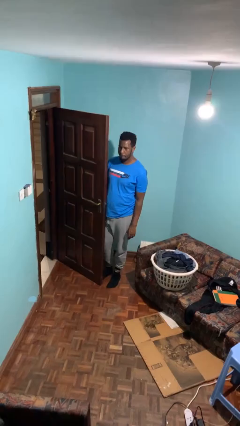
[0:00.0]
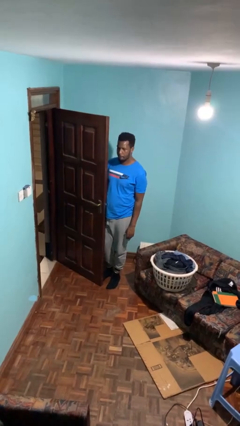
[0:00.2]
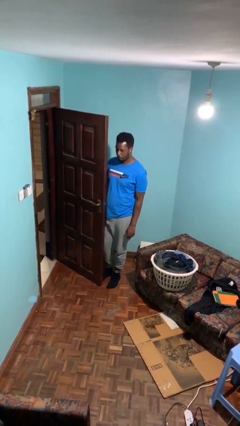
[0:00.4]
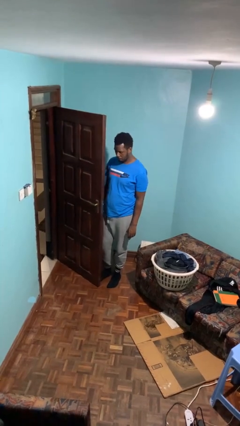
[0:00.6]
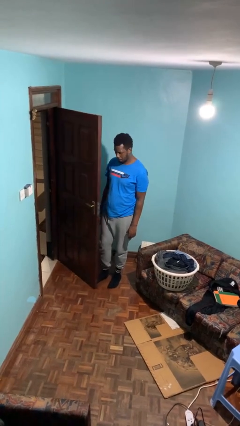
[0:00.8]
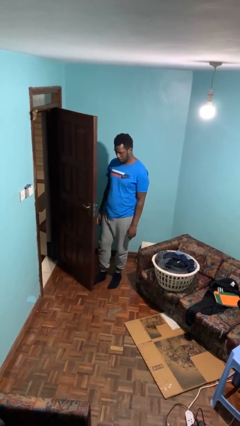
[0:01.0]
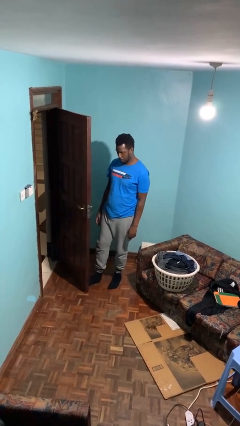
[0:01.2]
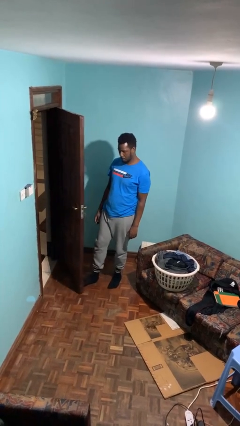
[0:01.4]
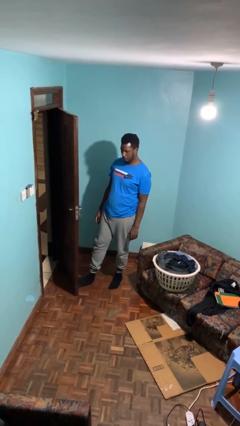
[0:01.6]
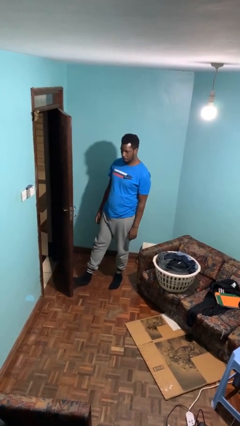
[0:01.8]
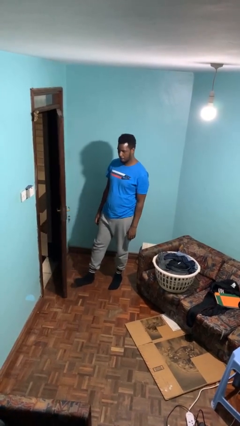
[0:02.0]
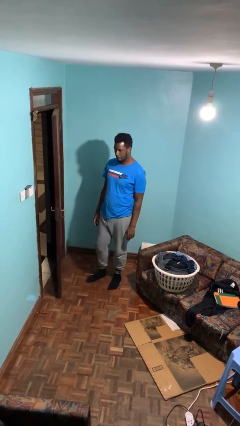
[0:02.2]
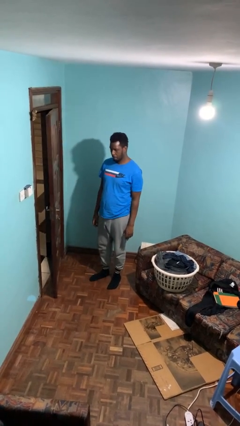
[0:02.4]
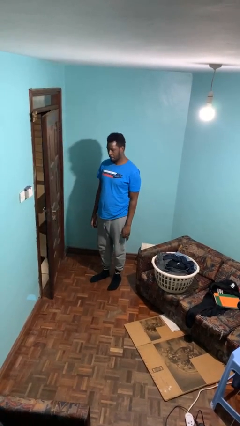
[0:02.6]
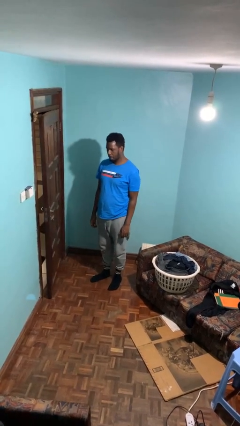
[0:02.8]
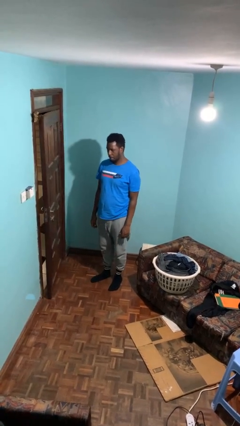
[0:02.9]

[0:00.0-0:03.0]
person closes door with foot

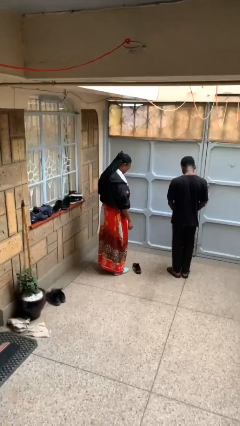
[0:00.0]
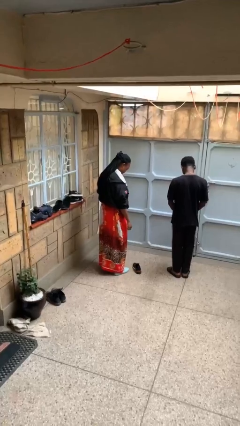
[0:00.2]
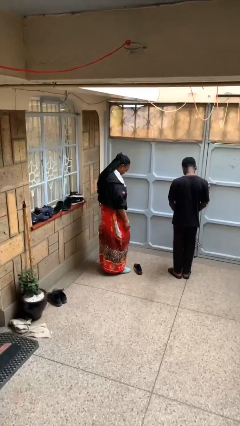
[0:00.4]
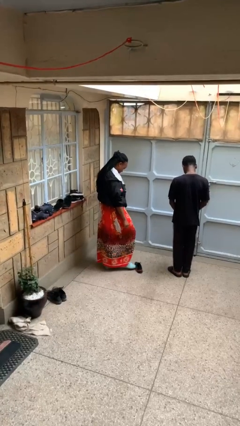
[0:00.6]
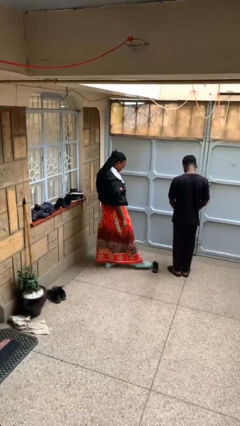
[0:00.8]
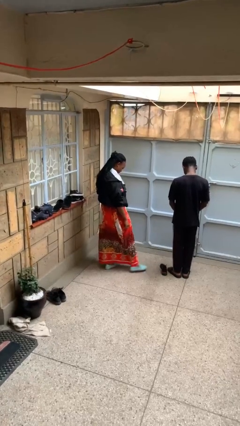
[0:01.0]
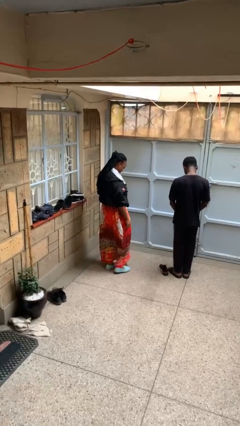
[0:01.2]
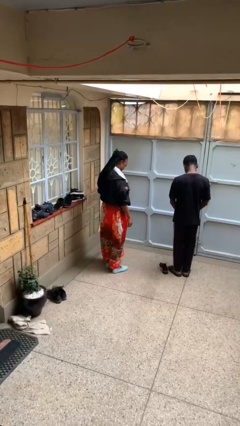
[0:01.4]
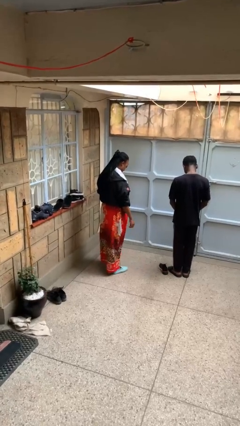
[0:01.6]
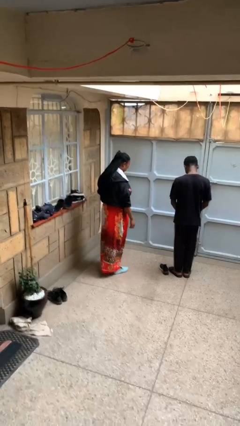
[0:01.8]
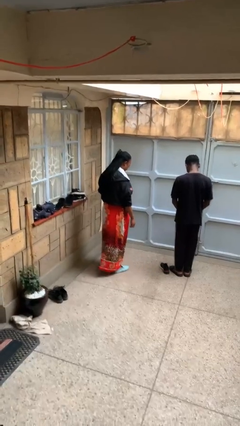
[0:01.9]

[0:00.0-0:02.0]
person kicks object to person

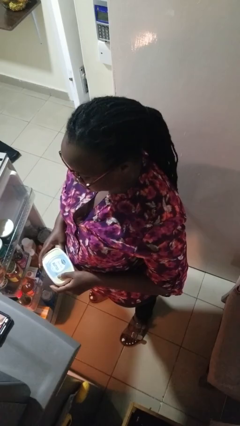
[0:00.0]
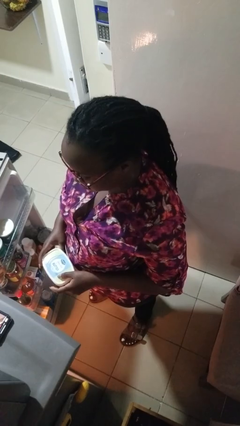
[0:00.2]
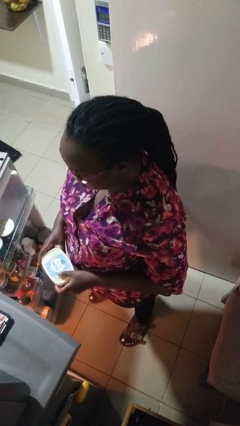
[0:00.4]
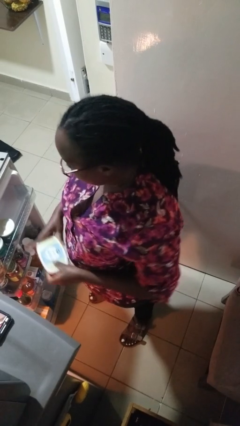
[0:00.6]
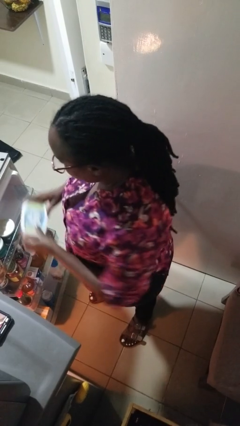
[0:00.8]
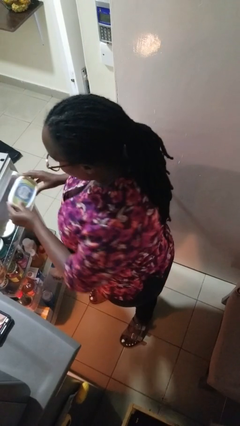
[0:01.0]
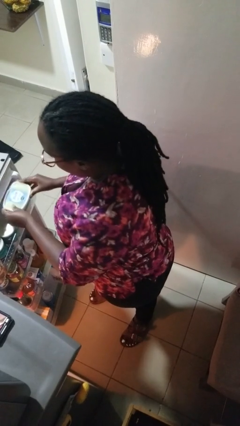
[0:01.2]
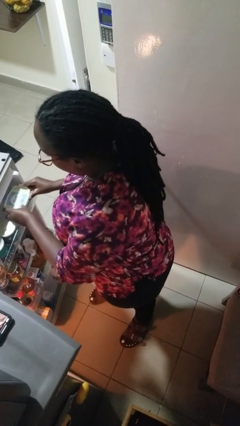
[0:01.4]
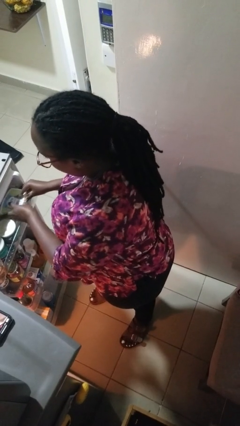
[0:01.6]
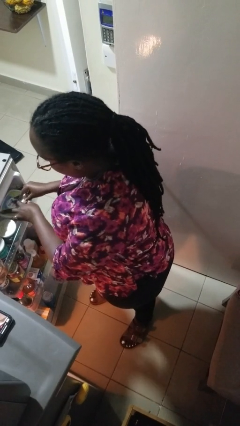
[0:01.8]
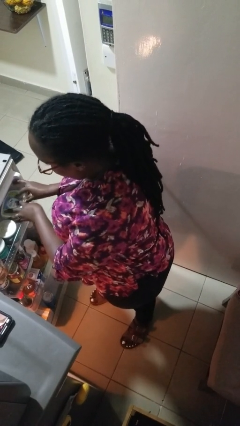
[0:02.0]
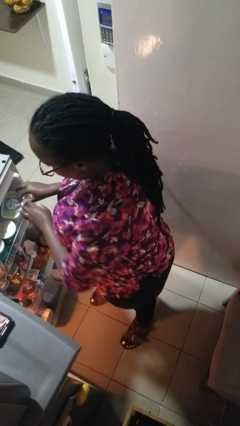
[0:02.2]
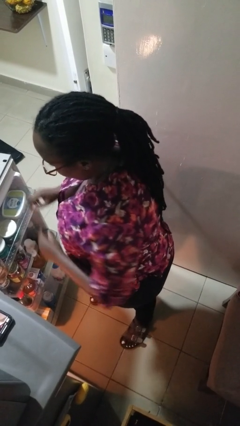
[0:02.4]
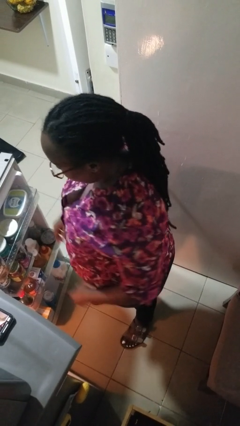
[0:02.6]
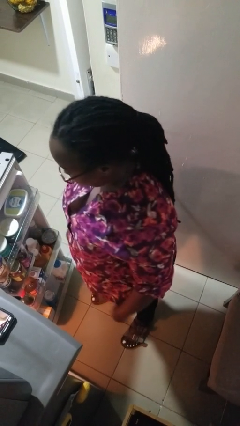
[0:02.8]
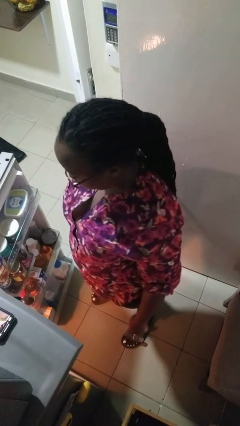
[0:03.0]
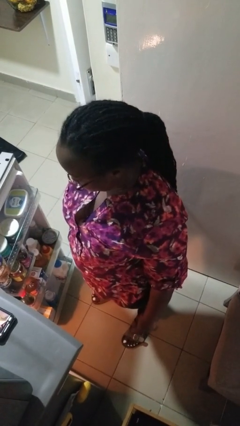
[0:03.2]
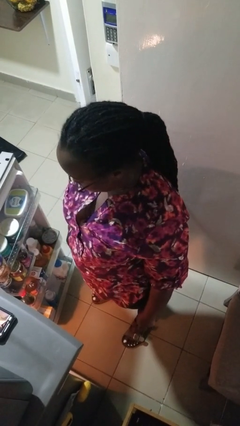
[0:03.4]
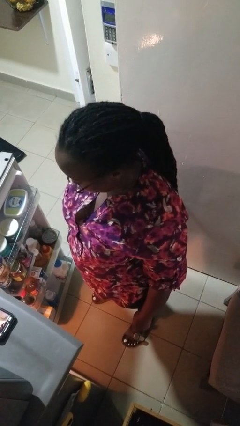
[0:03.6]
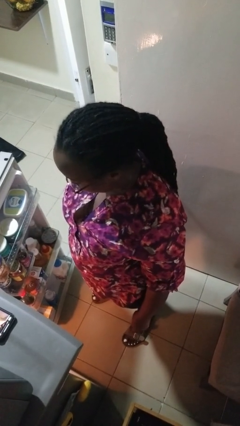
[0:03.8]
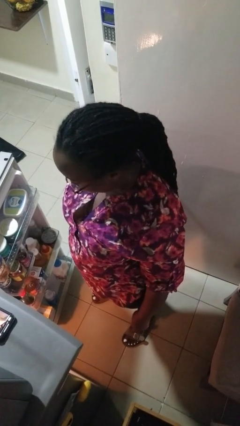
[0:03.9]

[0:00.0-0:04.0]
person puts object into refrigerator

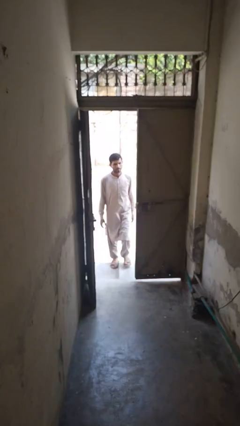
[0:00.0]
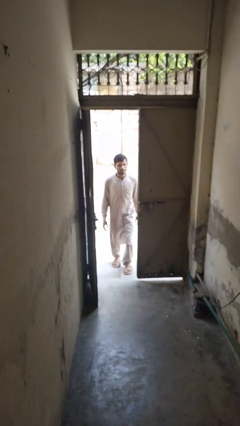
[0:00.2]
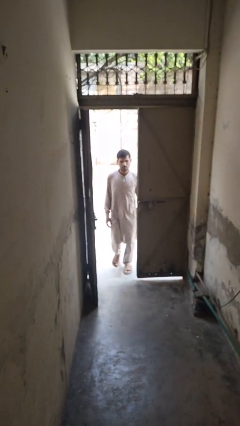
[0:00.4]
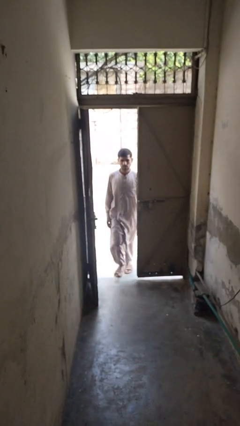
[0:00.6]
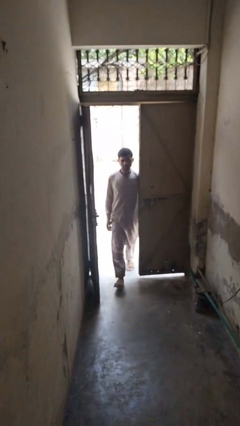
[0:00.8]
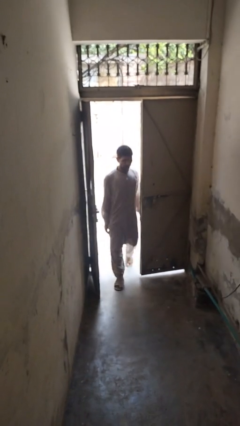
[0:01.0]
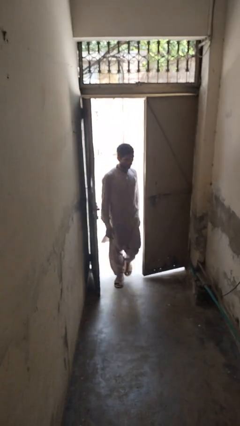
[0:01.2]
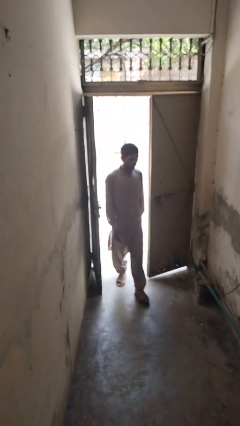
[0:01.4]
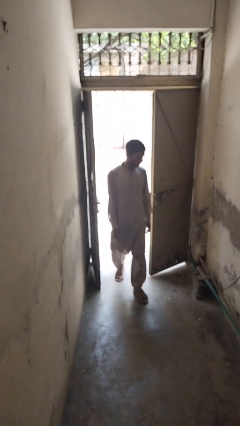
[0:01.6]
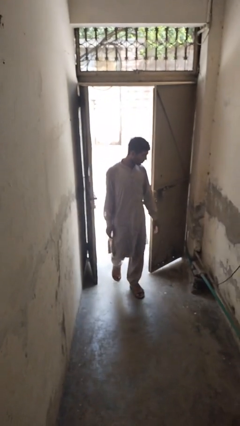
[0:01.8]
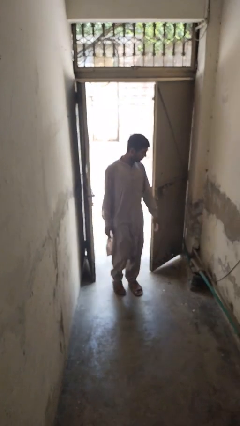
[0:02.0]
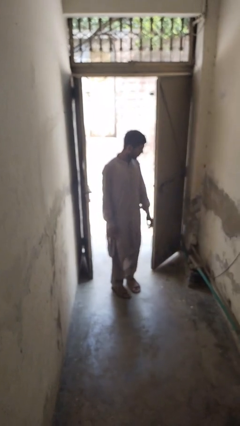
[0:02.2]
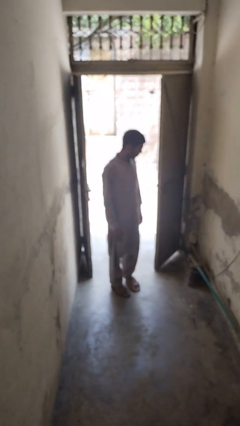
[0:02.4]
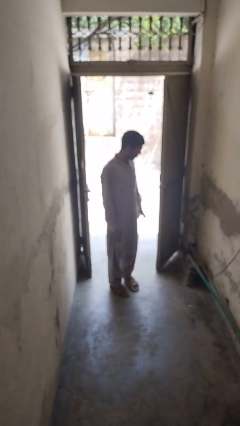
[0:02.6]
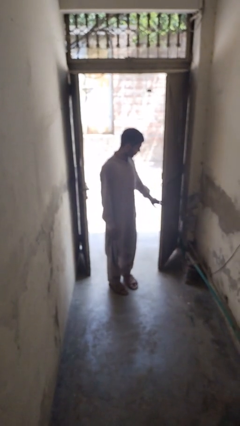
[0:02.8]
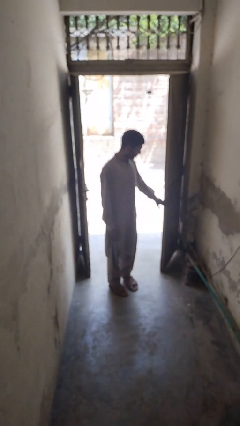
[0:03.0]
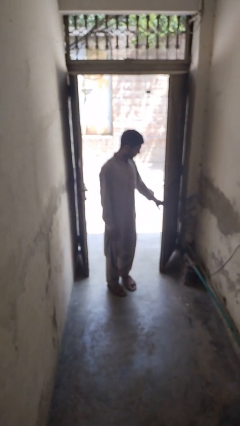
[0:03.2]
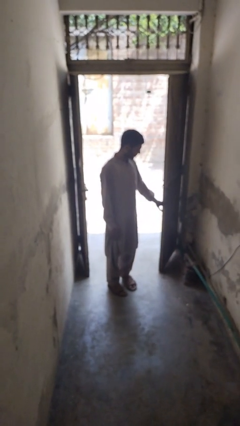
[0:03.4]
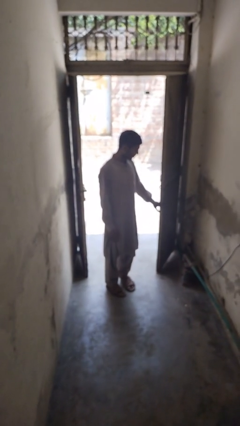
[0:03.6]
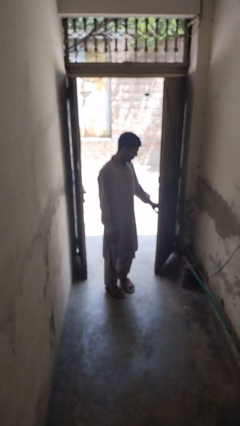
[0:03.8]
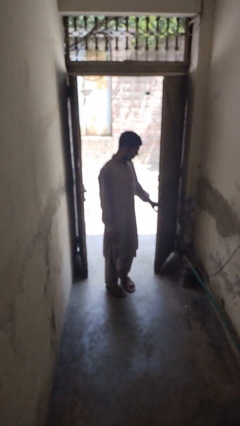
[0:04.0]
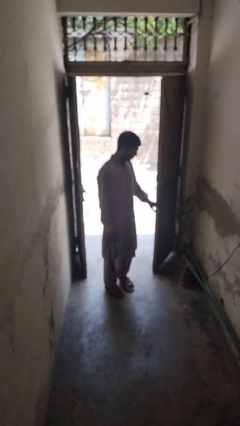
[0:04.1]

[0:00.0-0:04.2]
person bumps into wall

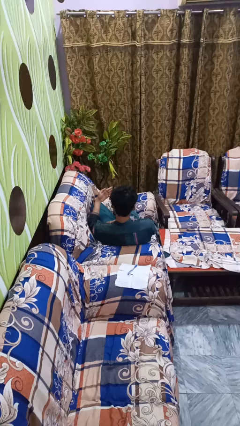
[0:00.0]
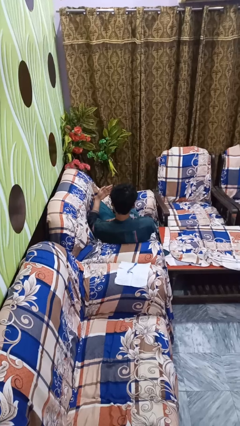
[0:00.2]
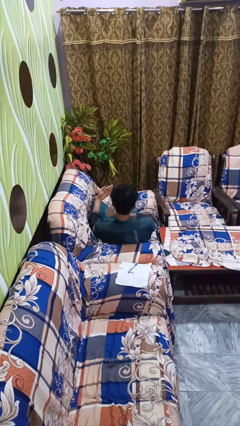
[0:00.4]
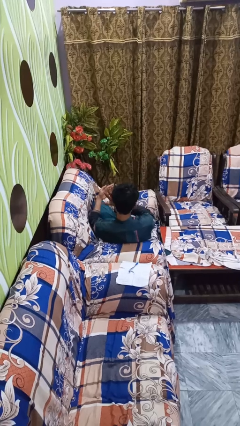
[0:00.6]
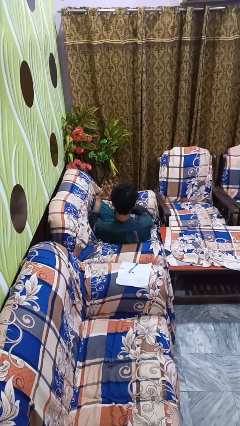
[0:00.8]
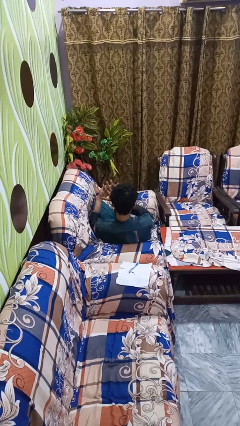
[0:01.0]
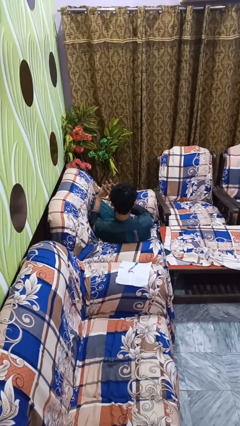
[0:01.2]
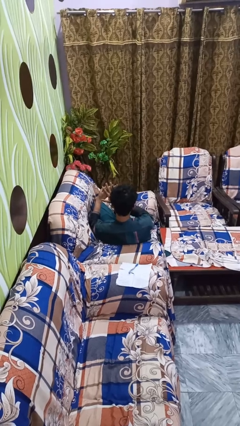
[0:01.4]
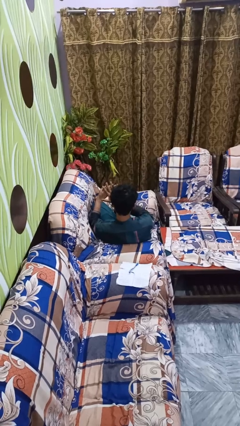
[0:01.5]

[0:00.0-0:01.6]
person gestures number five

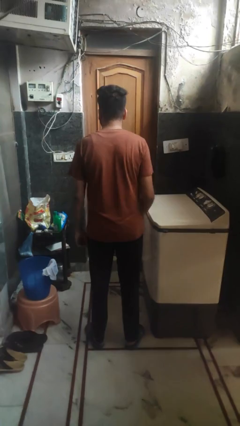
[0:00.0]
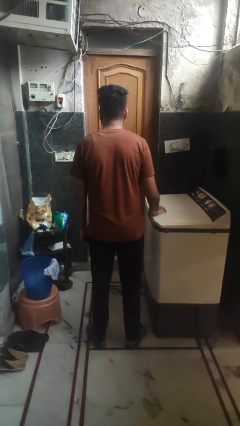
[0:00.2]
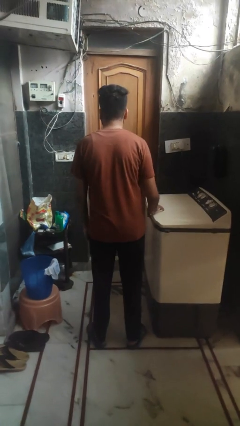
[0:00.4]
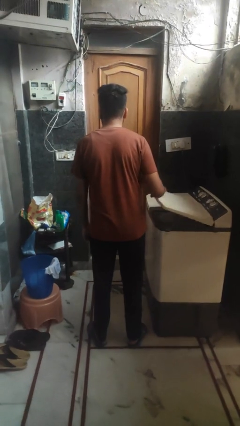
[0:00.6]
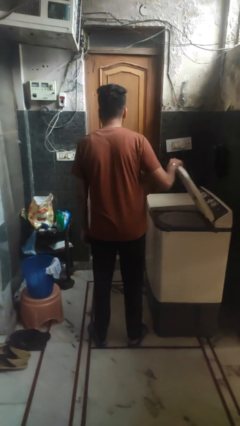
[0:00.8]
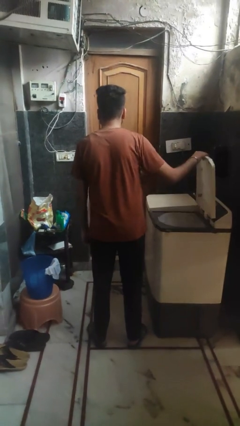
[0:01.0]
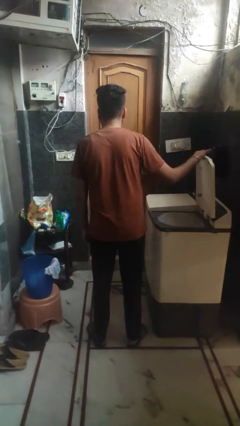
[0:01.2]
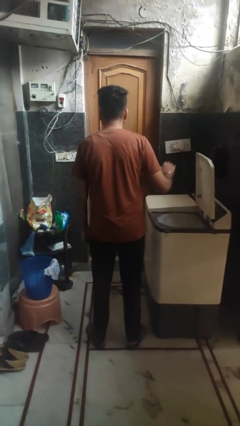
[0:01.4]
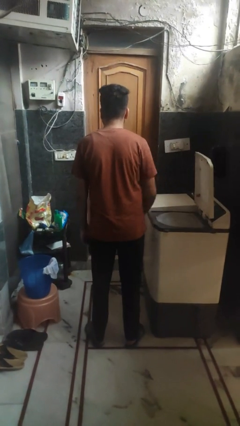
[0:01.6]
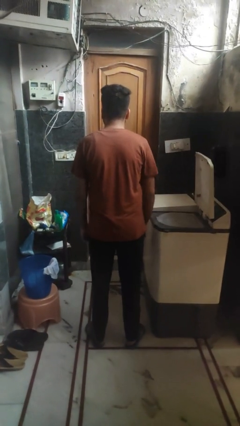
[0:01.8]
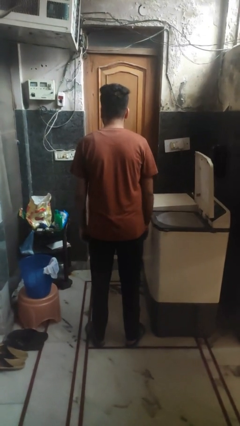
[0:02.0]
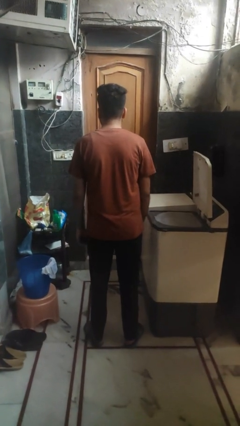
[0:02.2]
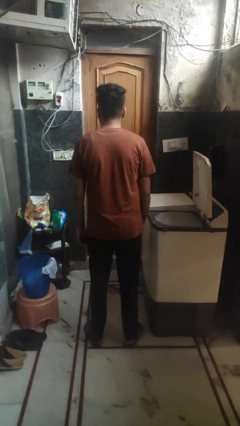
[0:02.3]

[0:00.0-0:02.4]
person opens clothes washer
